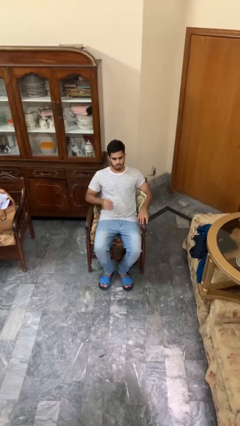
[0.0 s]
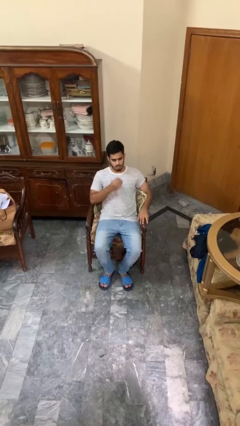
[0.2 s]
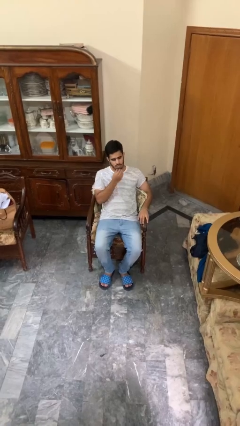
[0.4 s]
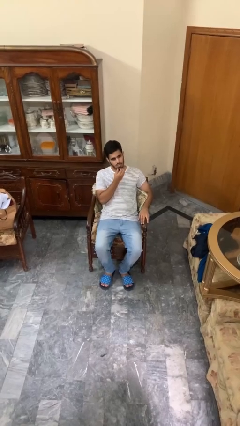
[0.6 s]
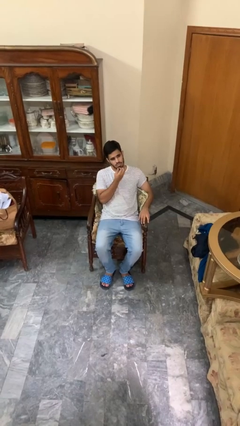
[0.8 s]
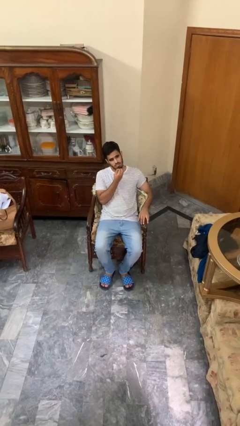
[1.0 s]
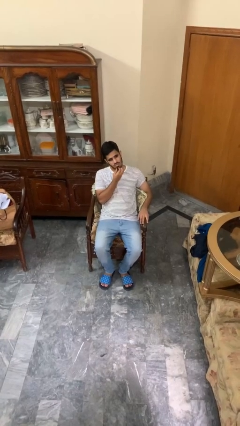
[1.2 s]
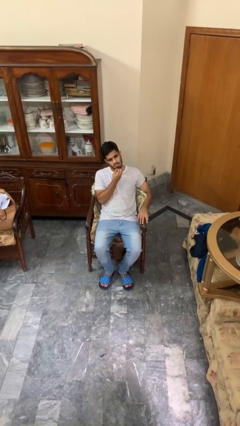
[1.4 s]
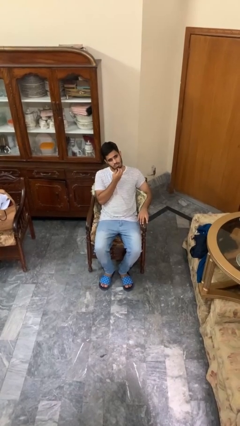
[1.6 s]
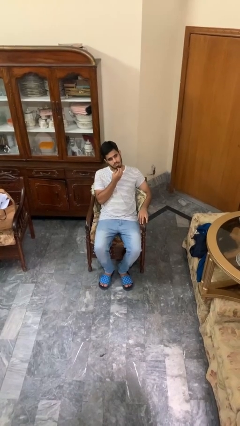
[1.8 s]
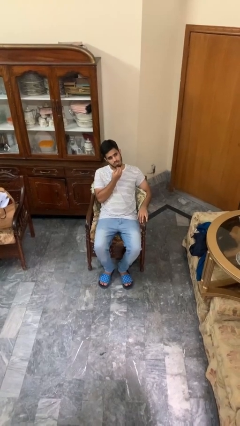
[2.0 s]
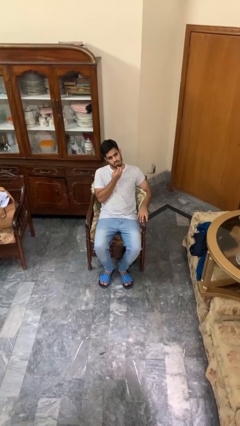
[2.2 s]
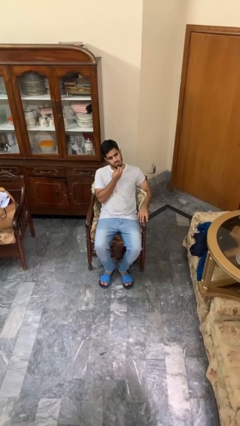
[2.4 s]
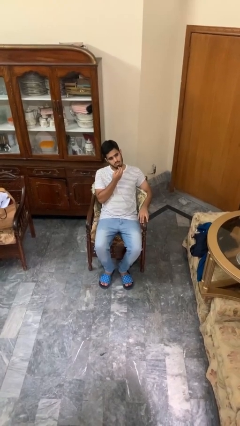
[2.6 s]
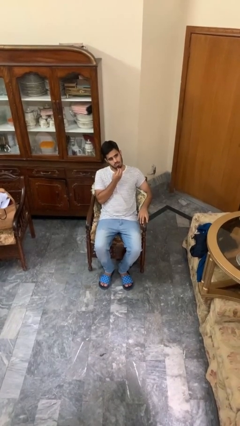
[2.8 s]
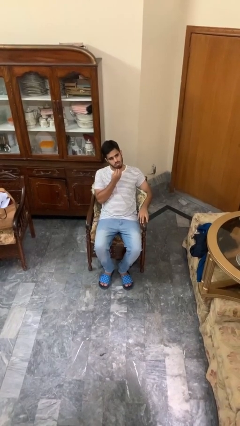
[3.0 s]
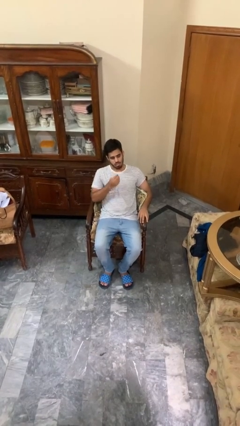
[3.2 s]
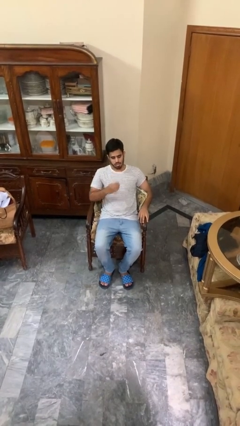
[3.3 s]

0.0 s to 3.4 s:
person strokes chin

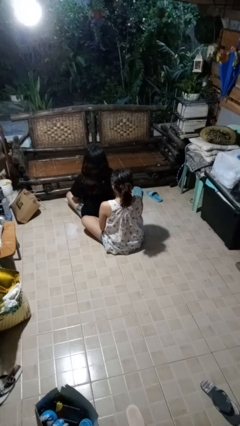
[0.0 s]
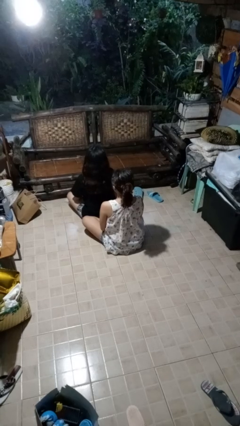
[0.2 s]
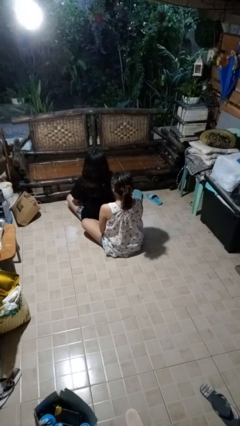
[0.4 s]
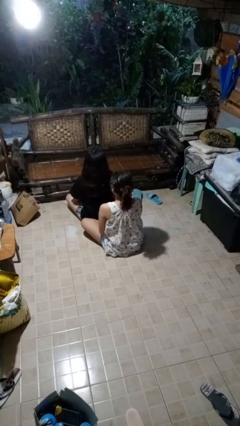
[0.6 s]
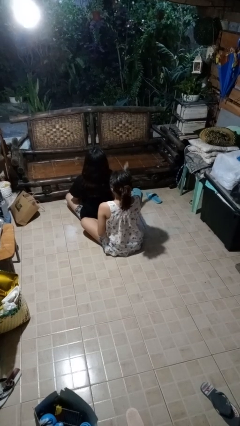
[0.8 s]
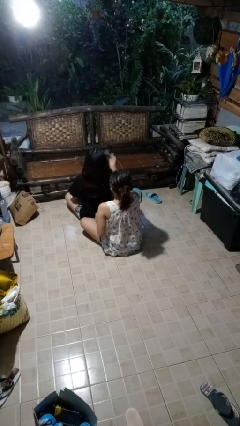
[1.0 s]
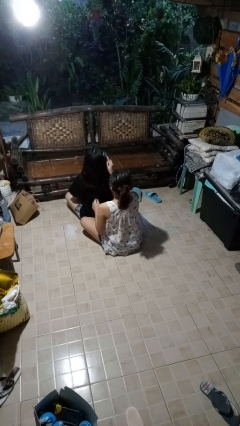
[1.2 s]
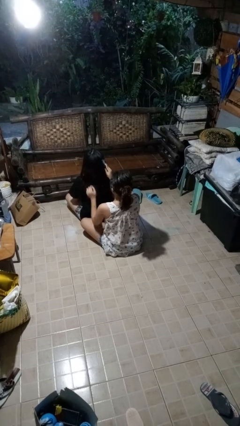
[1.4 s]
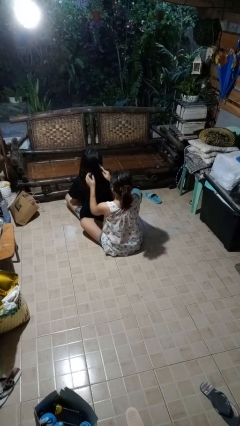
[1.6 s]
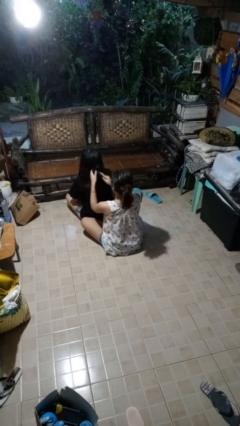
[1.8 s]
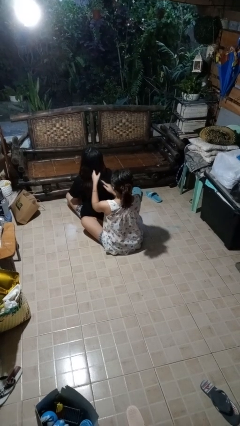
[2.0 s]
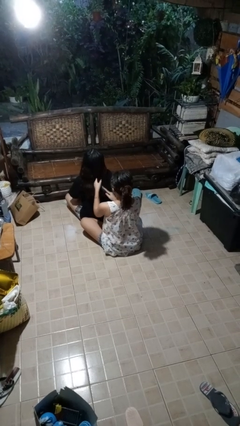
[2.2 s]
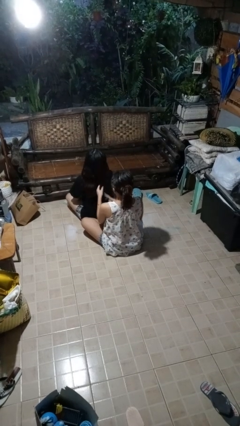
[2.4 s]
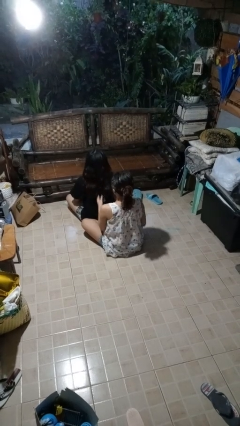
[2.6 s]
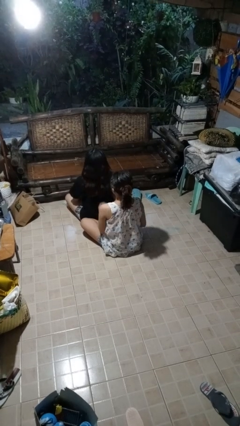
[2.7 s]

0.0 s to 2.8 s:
person brushes hair of person

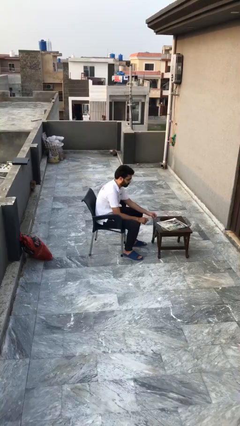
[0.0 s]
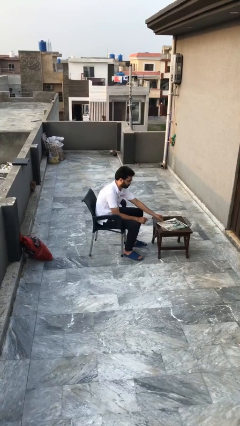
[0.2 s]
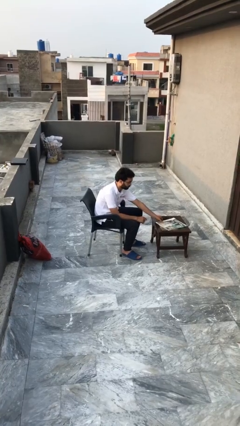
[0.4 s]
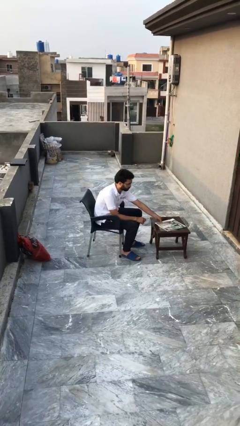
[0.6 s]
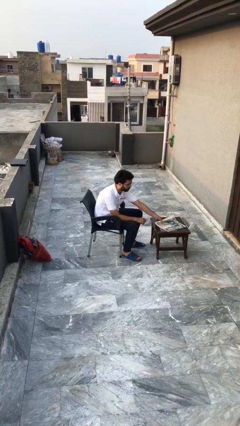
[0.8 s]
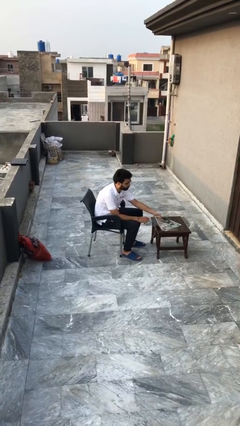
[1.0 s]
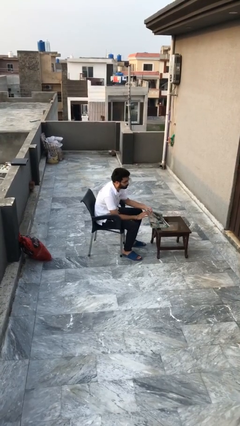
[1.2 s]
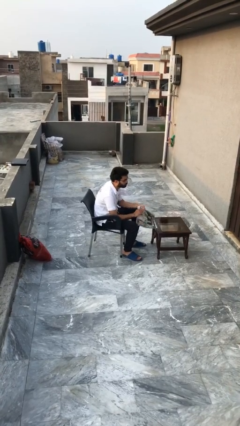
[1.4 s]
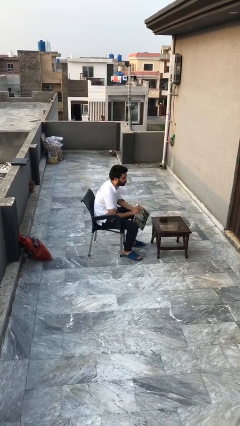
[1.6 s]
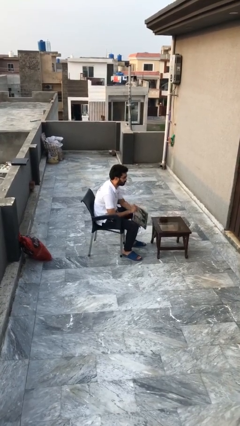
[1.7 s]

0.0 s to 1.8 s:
person picks up object from table

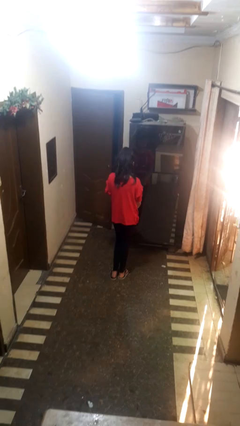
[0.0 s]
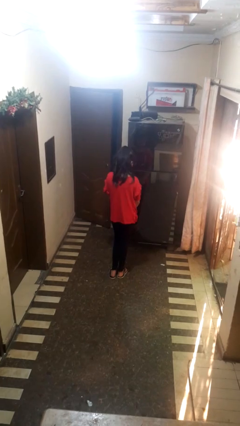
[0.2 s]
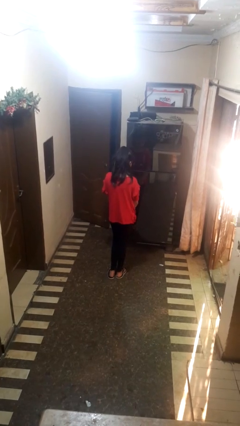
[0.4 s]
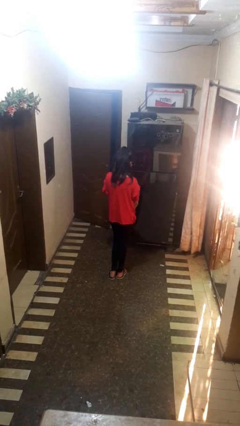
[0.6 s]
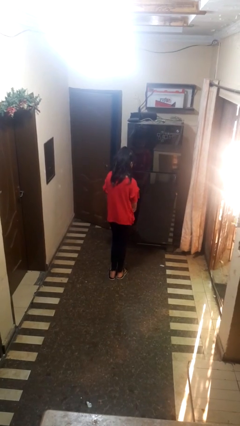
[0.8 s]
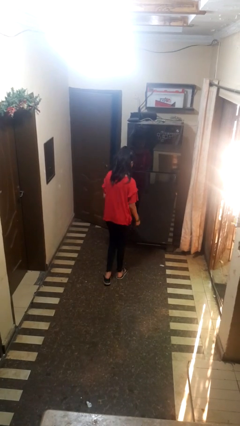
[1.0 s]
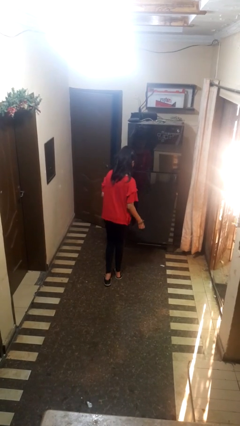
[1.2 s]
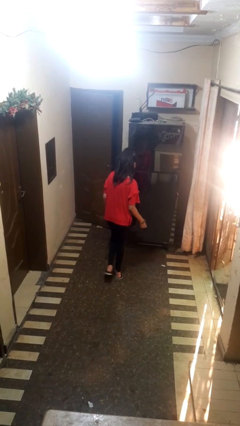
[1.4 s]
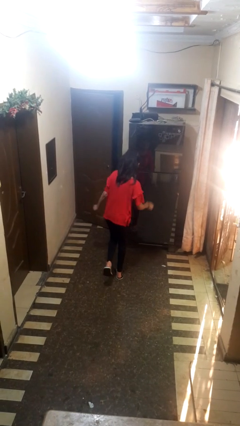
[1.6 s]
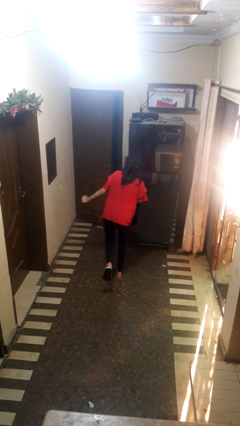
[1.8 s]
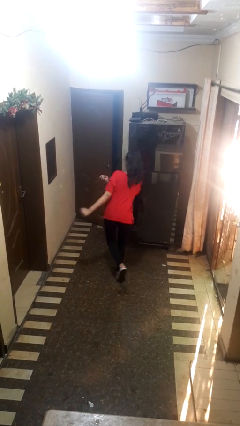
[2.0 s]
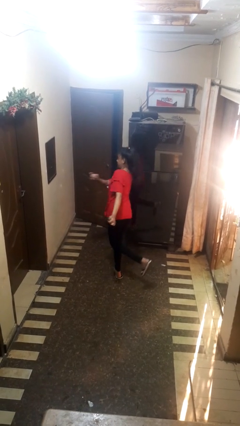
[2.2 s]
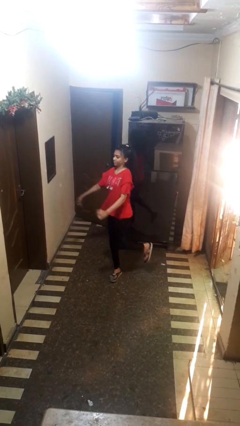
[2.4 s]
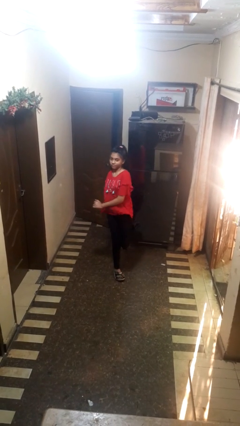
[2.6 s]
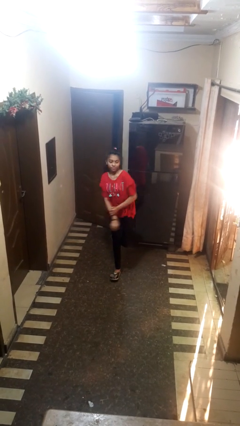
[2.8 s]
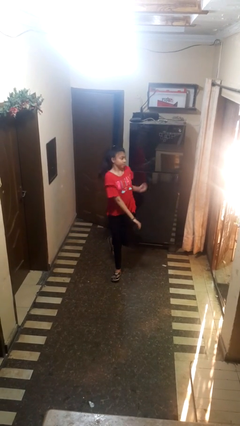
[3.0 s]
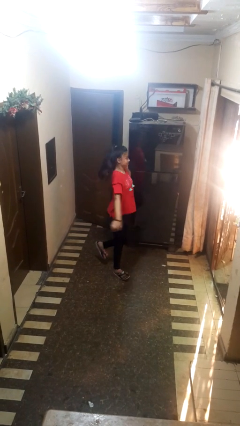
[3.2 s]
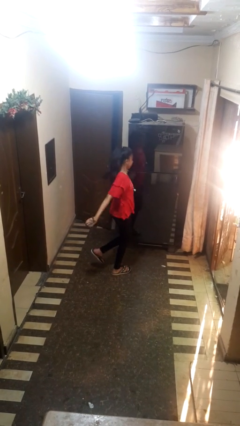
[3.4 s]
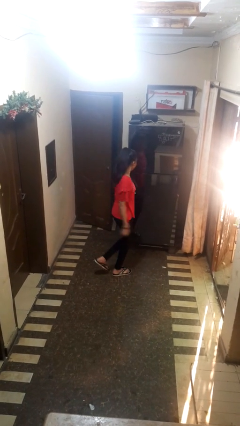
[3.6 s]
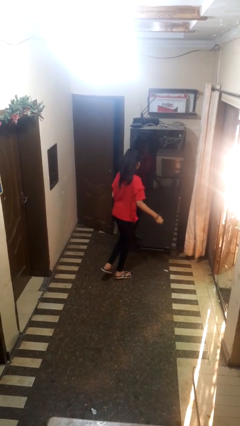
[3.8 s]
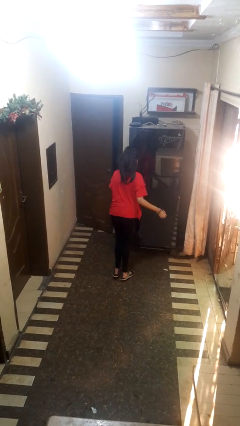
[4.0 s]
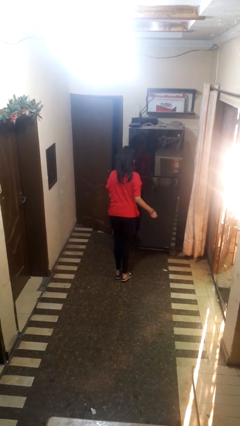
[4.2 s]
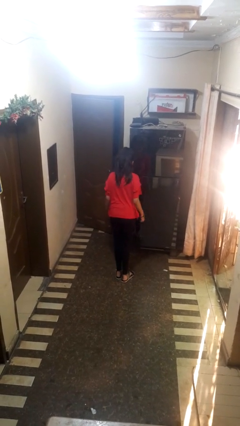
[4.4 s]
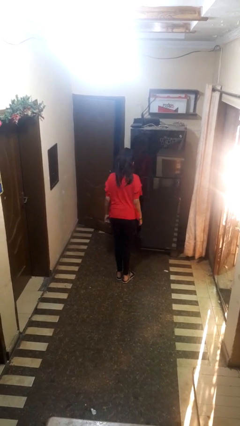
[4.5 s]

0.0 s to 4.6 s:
person twirls

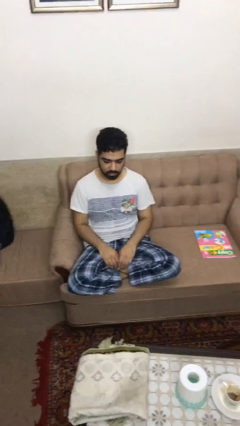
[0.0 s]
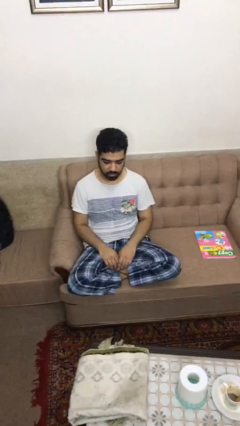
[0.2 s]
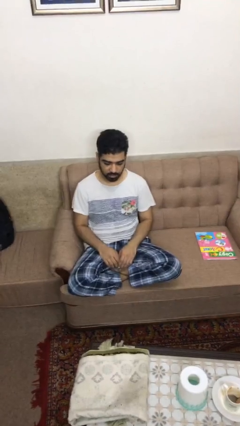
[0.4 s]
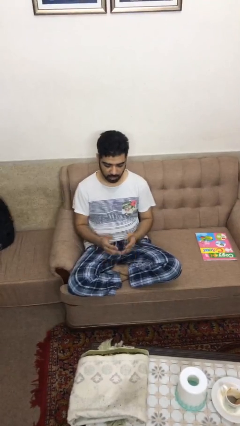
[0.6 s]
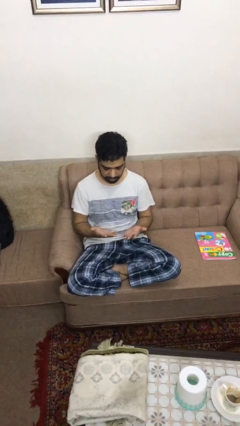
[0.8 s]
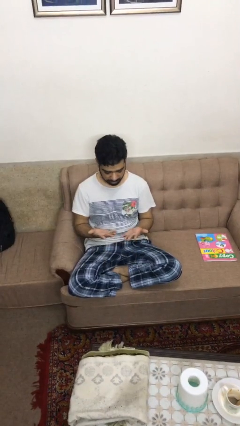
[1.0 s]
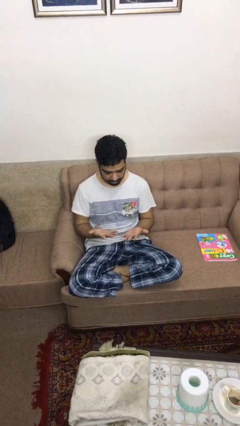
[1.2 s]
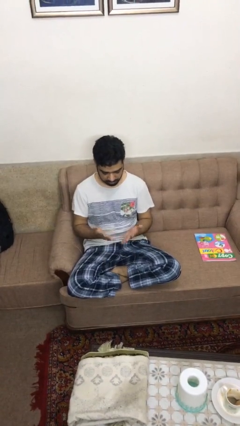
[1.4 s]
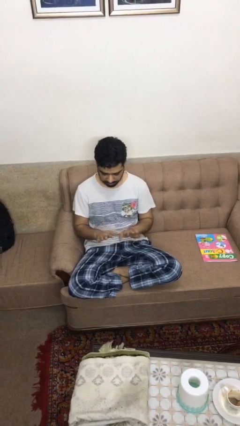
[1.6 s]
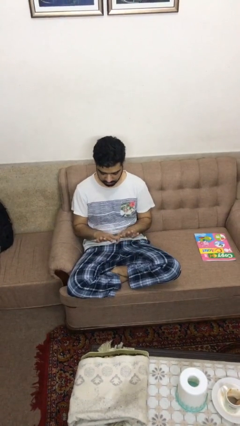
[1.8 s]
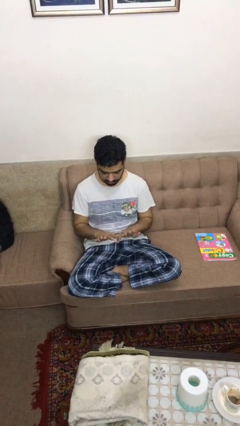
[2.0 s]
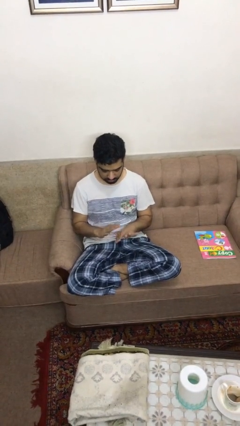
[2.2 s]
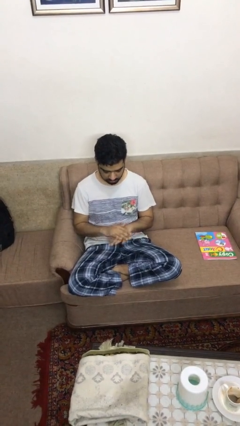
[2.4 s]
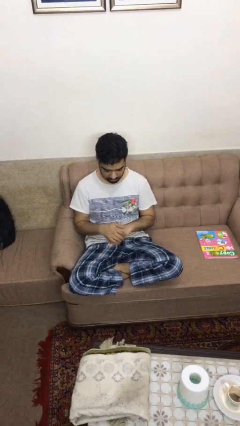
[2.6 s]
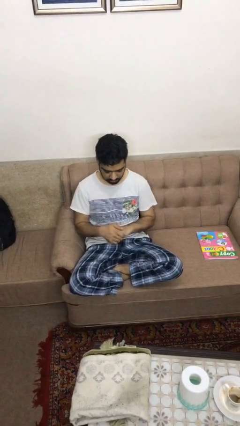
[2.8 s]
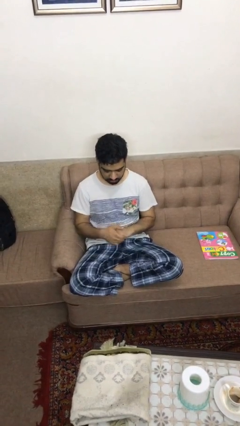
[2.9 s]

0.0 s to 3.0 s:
person looks at hands in lap

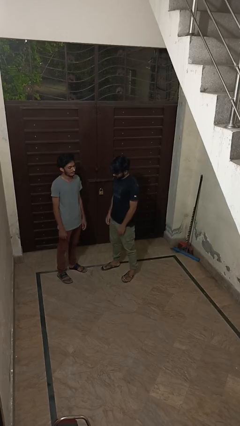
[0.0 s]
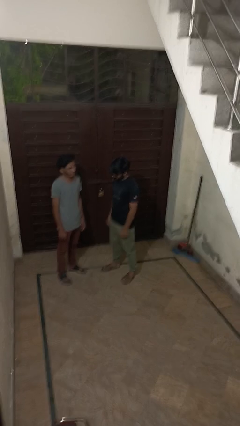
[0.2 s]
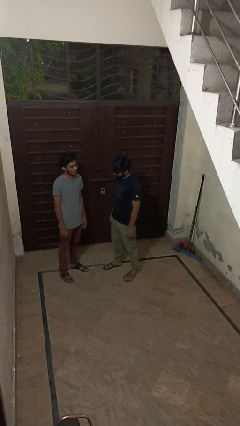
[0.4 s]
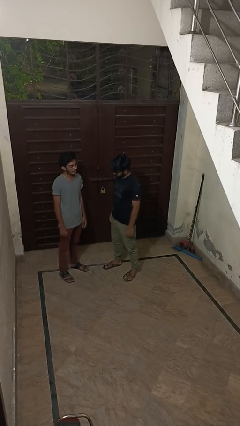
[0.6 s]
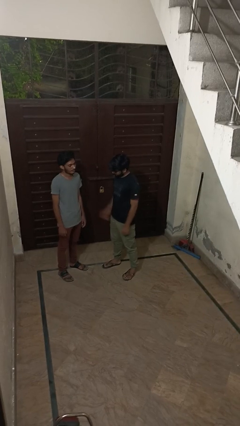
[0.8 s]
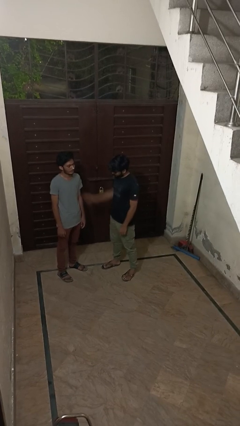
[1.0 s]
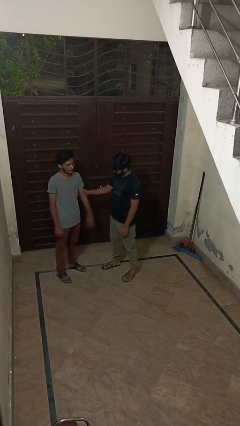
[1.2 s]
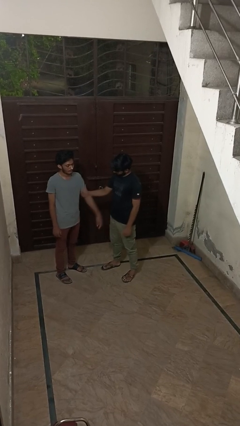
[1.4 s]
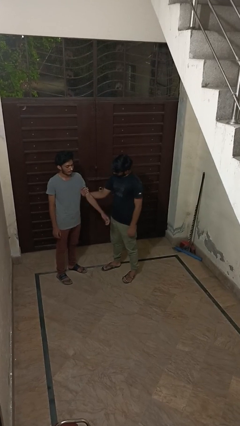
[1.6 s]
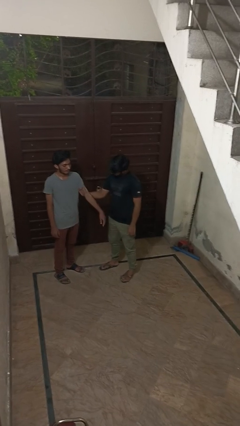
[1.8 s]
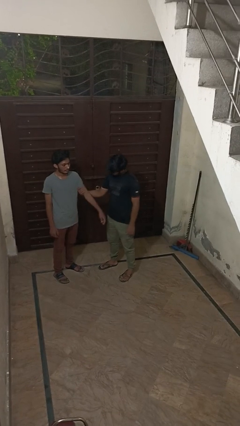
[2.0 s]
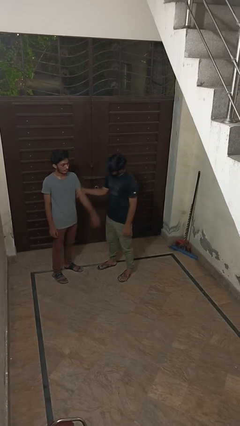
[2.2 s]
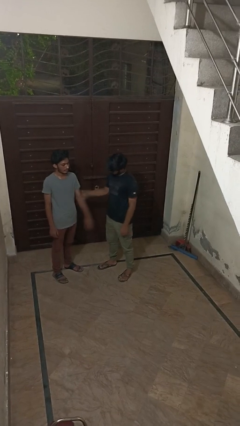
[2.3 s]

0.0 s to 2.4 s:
person grabs person by bicep
